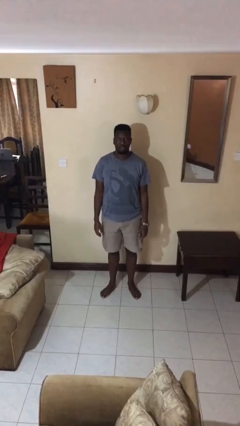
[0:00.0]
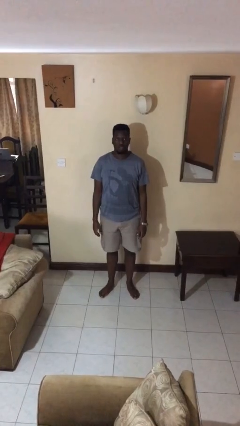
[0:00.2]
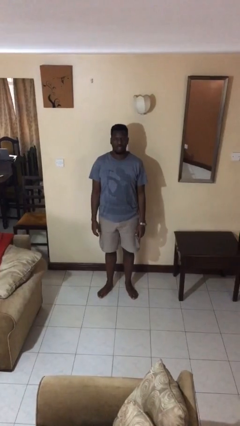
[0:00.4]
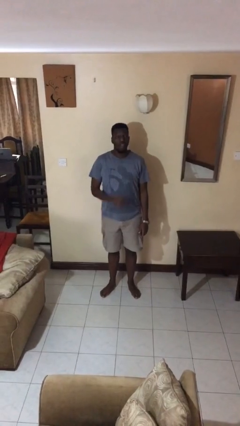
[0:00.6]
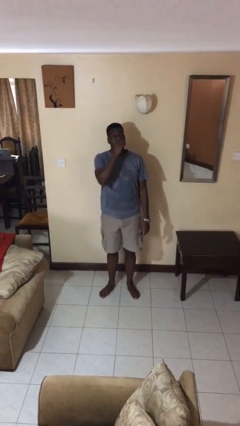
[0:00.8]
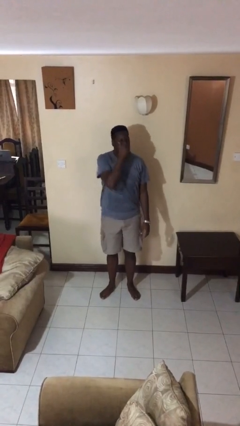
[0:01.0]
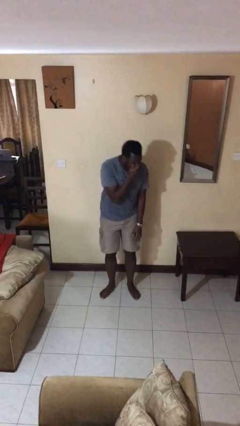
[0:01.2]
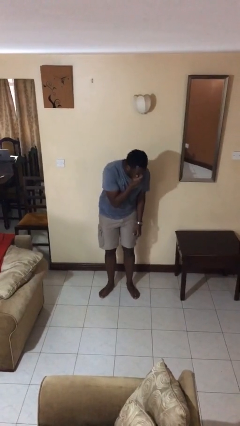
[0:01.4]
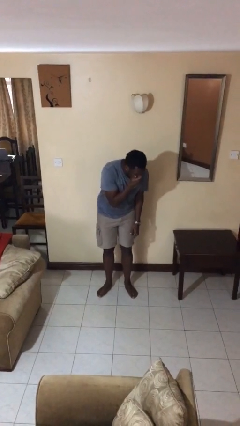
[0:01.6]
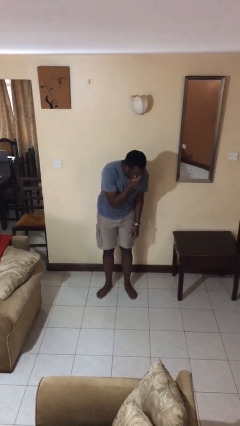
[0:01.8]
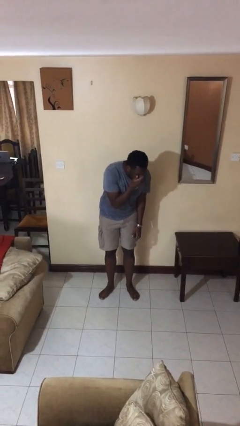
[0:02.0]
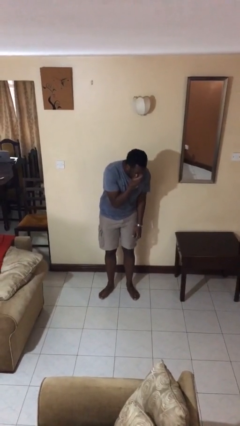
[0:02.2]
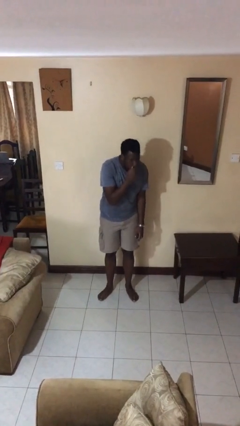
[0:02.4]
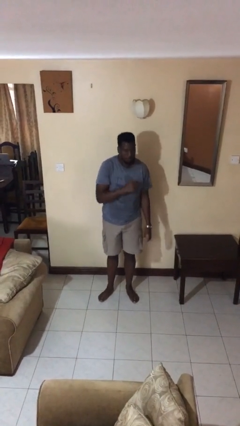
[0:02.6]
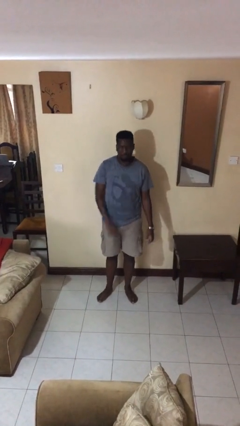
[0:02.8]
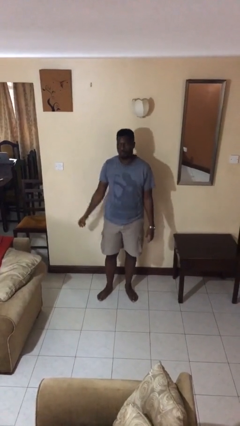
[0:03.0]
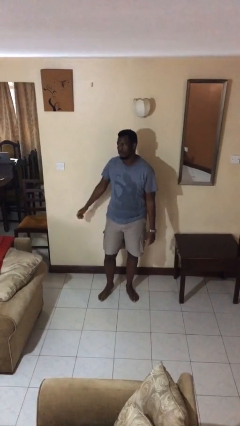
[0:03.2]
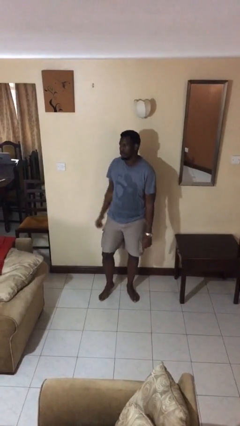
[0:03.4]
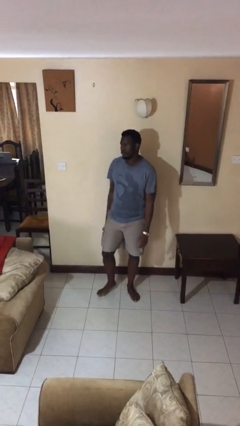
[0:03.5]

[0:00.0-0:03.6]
person sneezes into hand

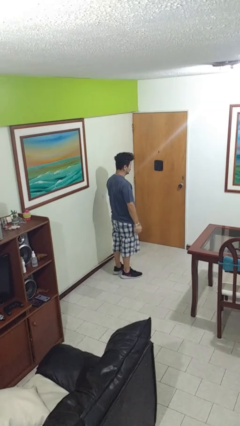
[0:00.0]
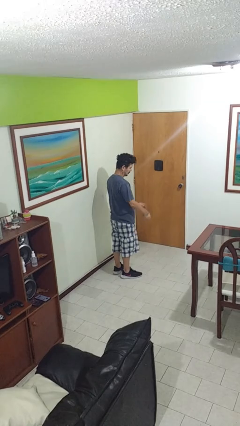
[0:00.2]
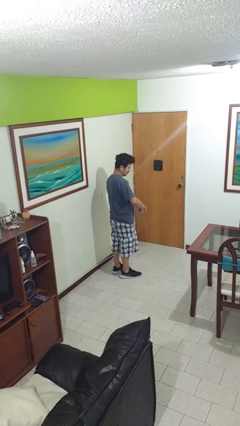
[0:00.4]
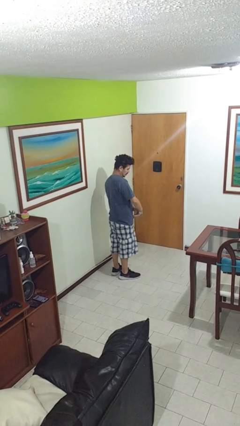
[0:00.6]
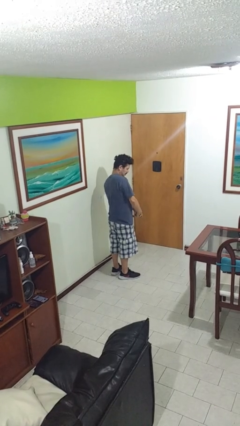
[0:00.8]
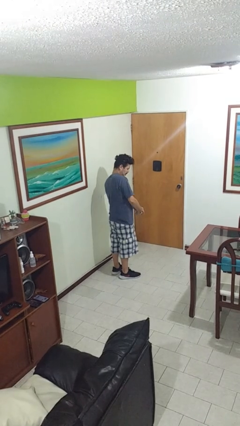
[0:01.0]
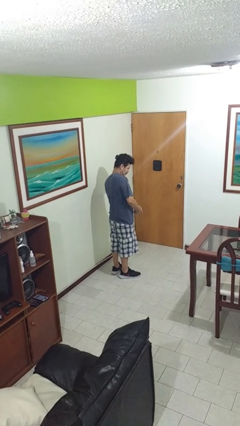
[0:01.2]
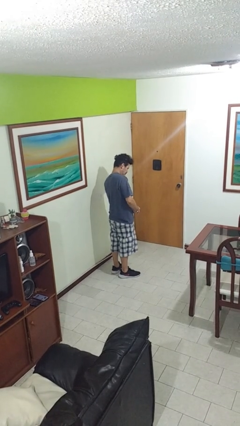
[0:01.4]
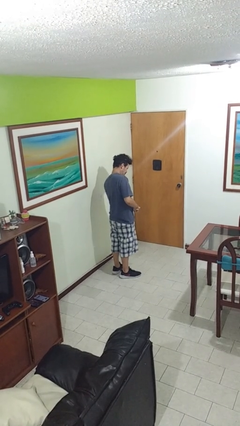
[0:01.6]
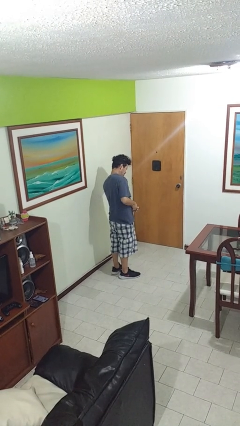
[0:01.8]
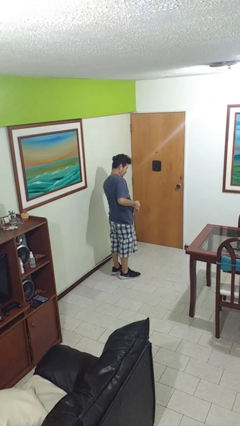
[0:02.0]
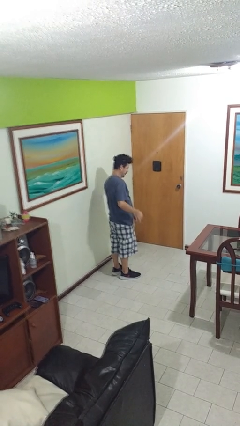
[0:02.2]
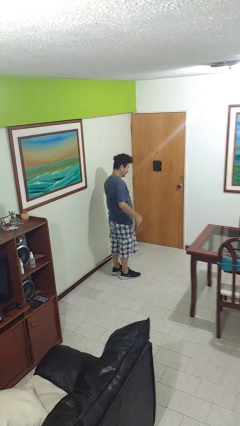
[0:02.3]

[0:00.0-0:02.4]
person takes off wristwatch

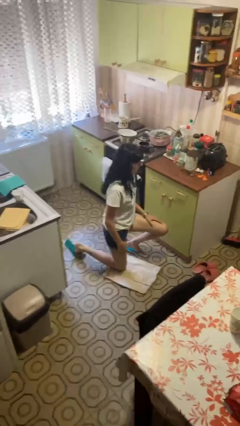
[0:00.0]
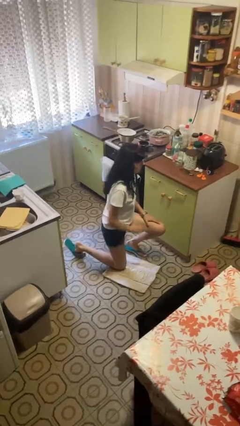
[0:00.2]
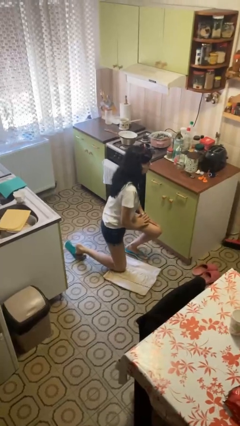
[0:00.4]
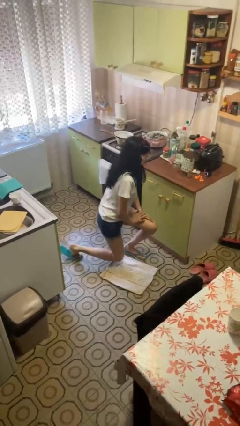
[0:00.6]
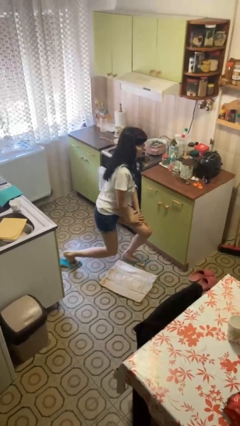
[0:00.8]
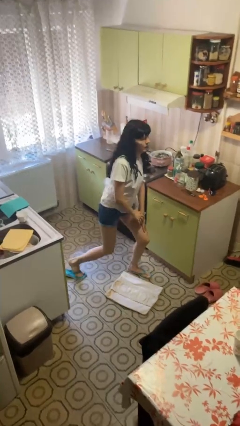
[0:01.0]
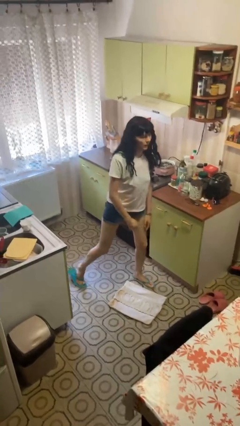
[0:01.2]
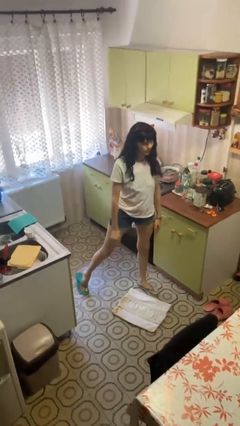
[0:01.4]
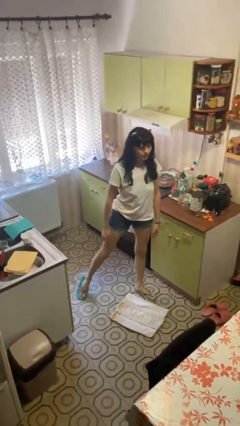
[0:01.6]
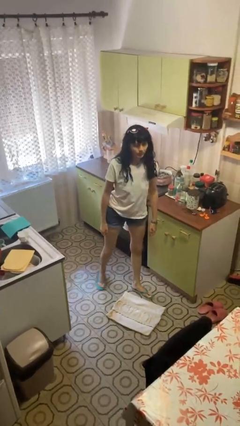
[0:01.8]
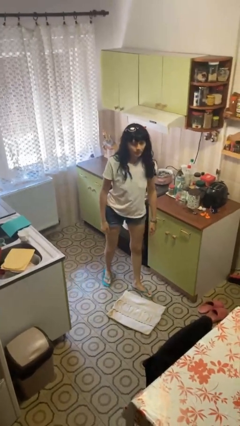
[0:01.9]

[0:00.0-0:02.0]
person stands up from floor

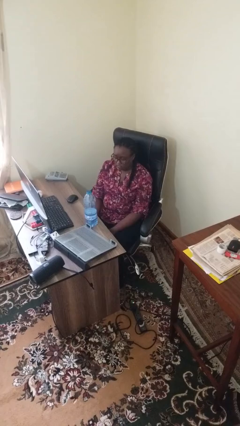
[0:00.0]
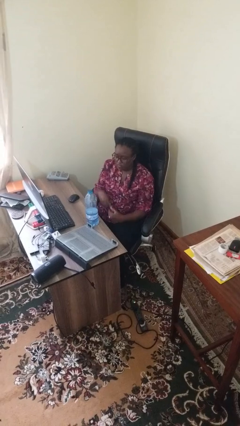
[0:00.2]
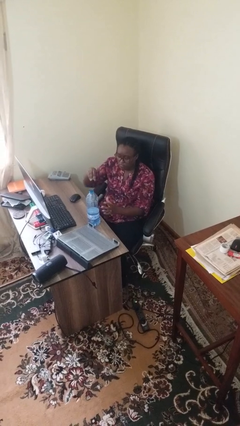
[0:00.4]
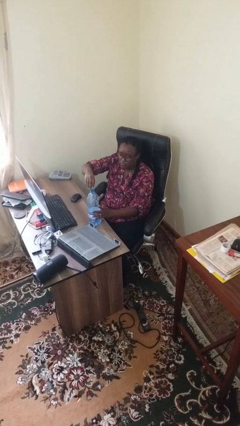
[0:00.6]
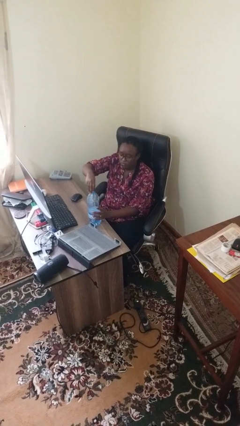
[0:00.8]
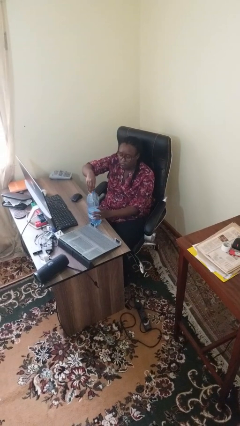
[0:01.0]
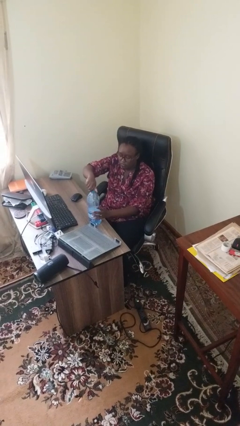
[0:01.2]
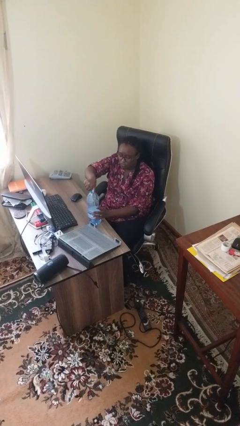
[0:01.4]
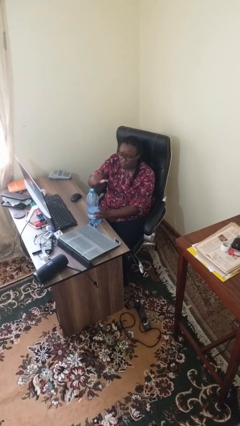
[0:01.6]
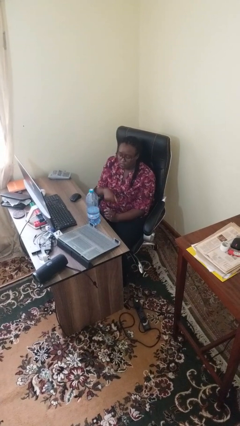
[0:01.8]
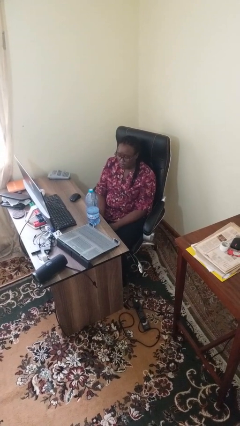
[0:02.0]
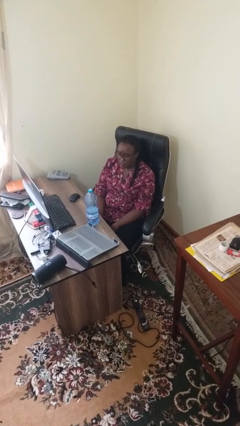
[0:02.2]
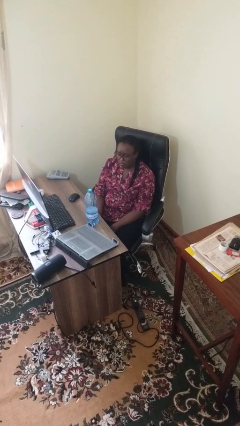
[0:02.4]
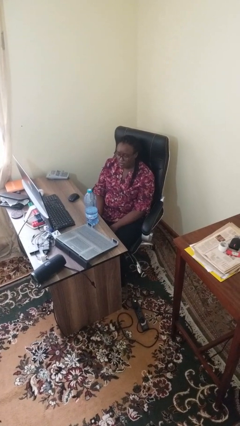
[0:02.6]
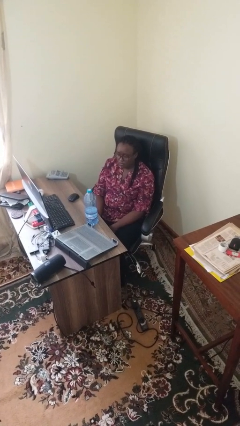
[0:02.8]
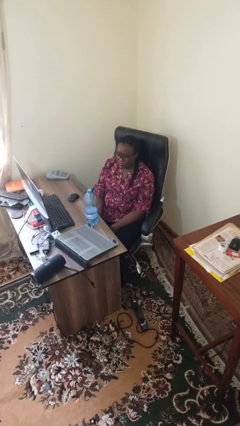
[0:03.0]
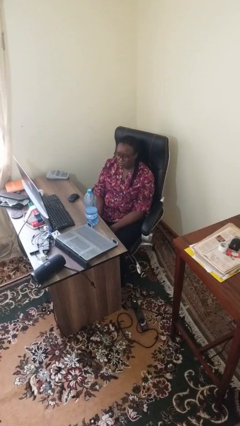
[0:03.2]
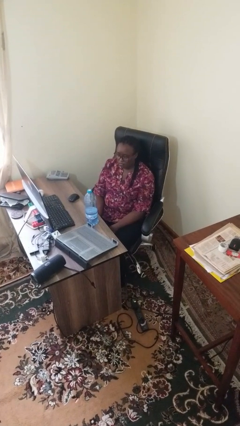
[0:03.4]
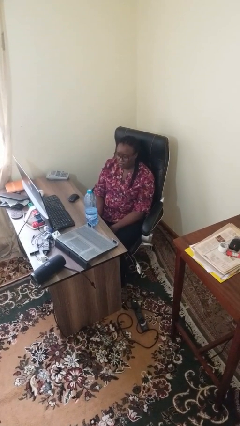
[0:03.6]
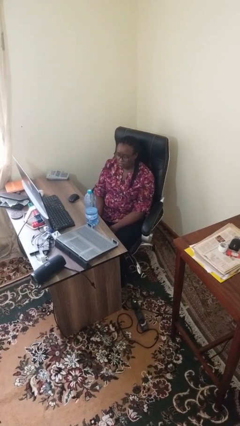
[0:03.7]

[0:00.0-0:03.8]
person screws lid to bottle

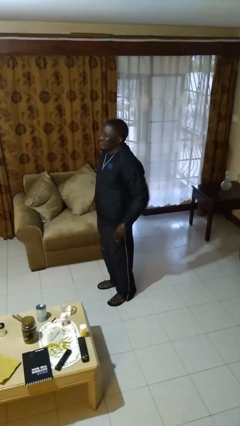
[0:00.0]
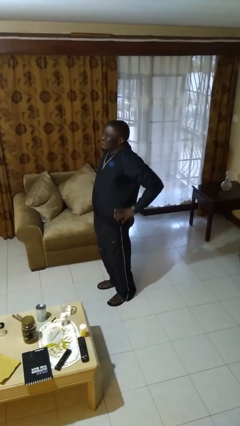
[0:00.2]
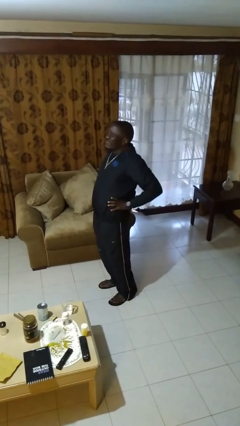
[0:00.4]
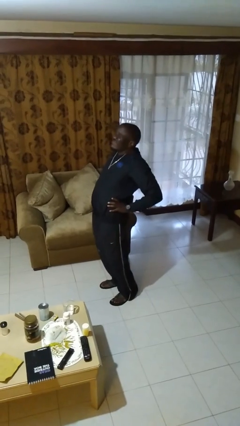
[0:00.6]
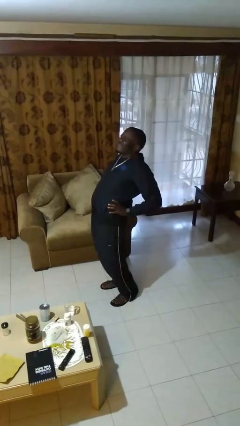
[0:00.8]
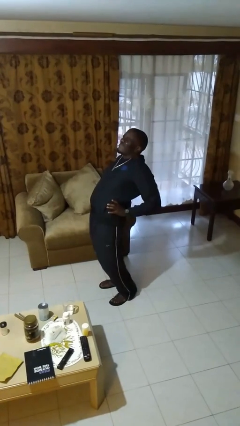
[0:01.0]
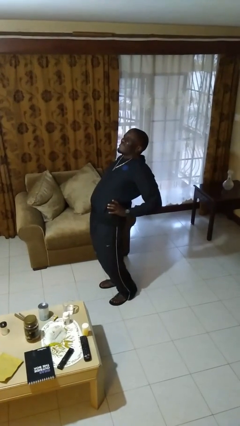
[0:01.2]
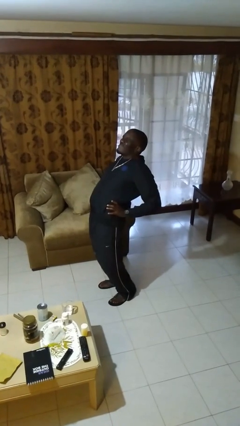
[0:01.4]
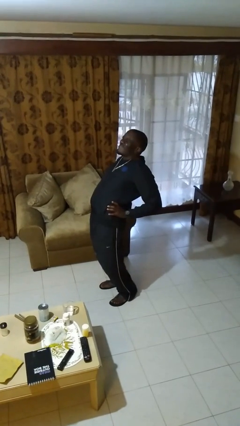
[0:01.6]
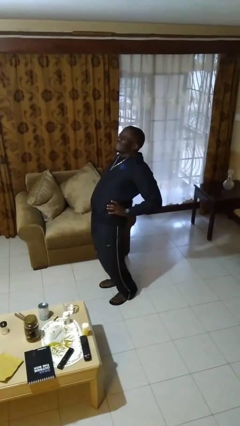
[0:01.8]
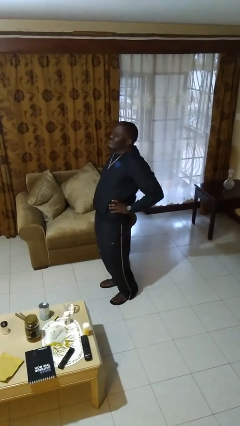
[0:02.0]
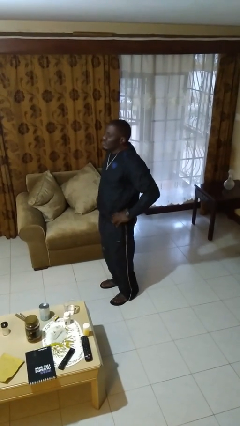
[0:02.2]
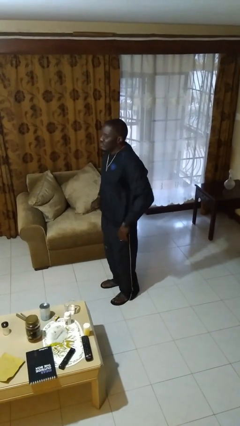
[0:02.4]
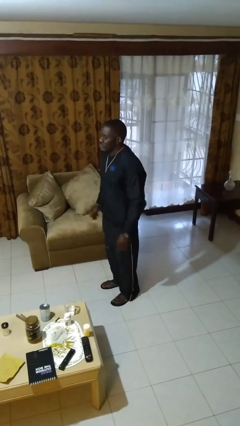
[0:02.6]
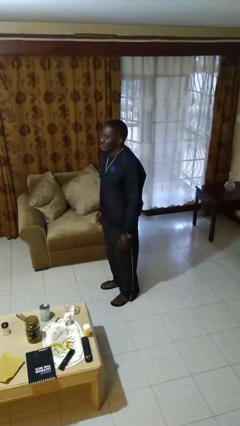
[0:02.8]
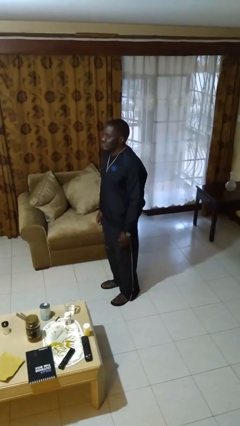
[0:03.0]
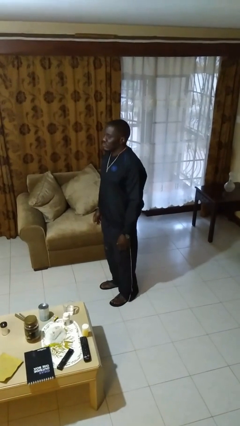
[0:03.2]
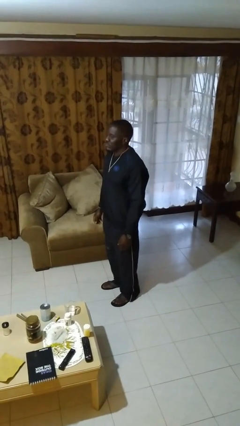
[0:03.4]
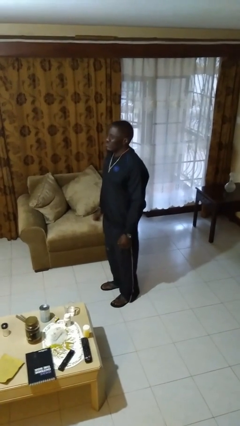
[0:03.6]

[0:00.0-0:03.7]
person stretches back

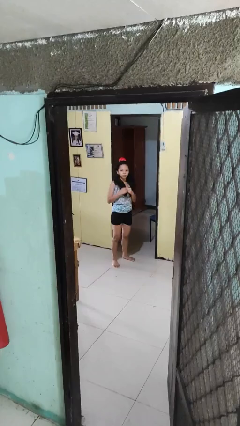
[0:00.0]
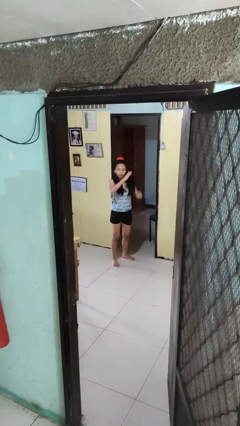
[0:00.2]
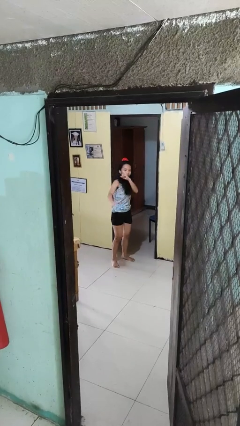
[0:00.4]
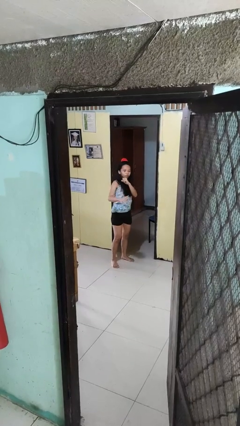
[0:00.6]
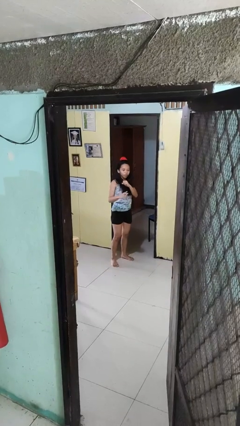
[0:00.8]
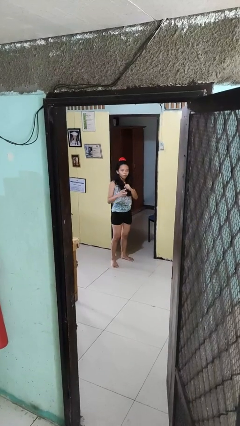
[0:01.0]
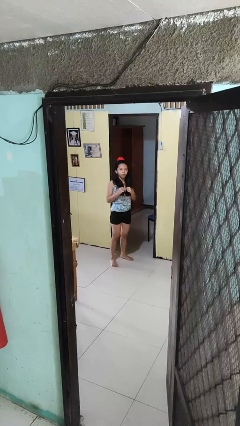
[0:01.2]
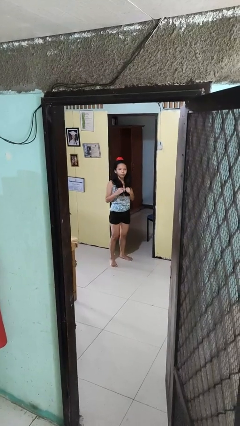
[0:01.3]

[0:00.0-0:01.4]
person karate chop

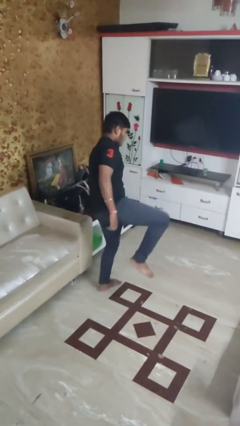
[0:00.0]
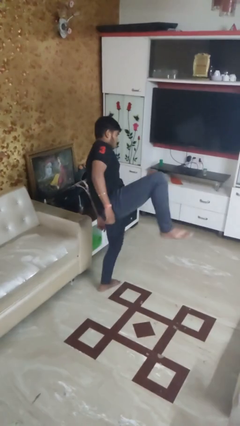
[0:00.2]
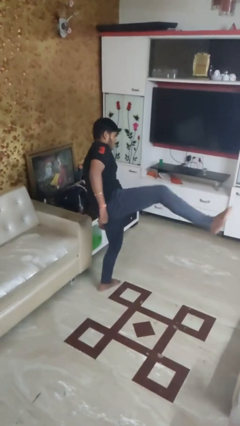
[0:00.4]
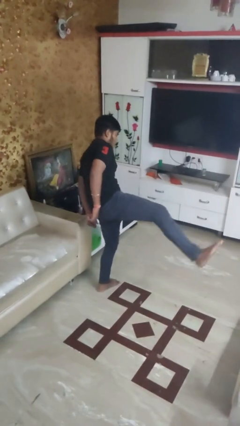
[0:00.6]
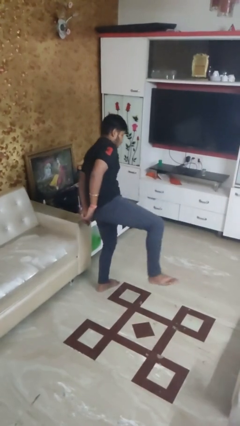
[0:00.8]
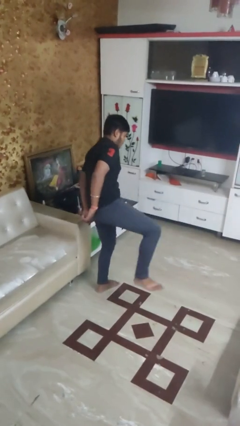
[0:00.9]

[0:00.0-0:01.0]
person karate kicks
